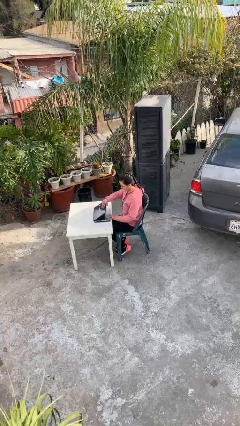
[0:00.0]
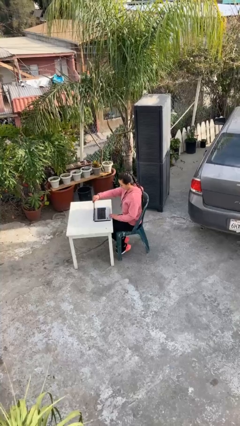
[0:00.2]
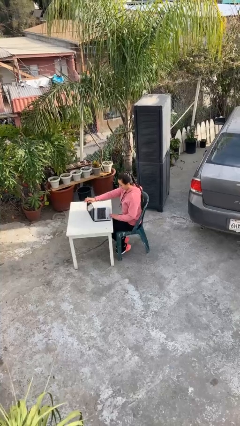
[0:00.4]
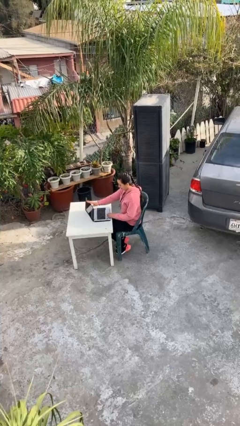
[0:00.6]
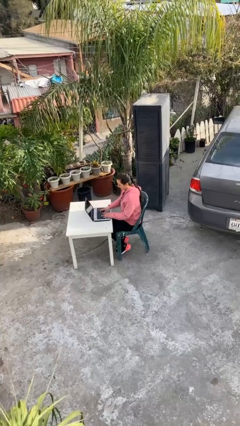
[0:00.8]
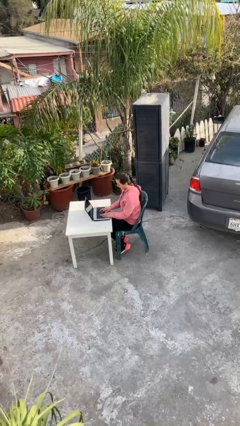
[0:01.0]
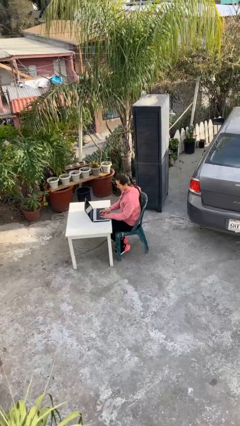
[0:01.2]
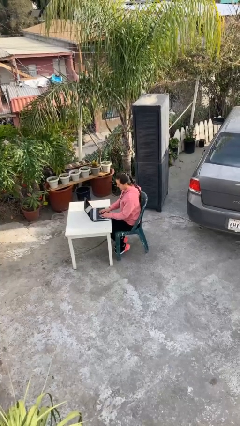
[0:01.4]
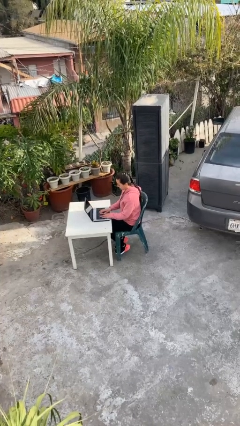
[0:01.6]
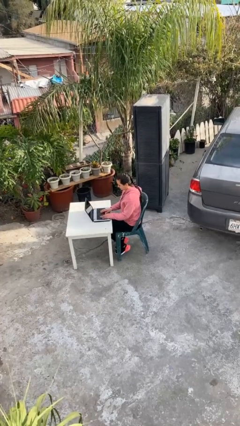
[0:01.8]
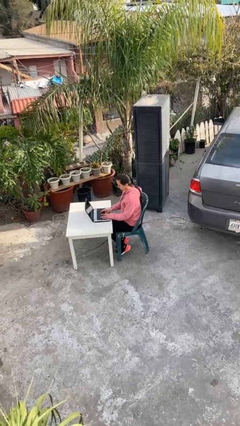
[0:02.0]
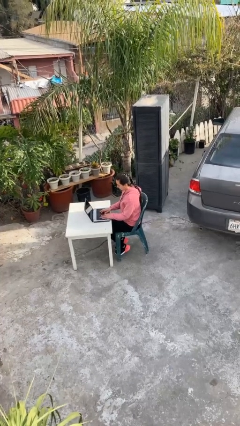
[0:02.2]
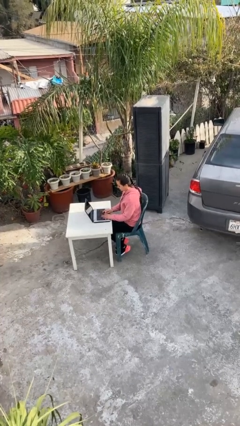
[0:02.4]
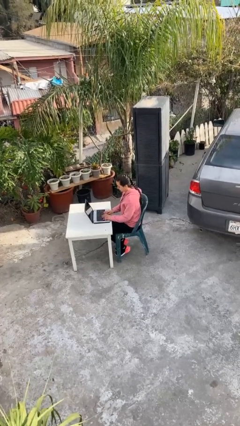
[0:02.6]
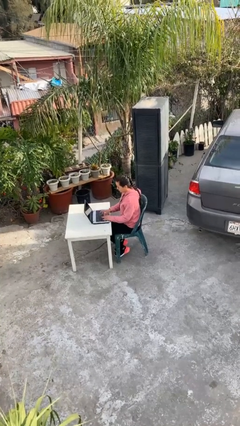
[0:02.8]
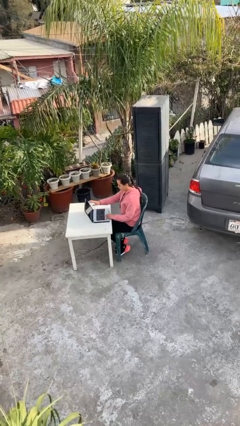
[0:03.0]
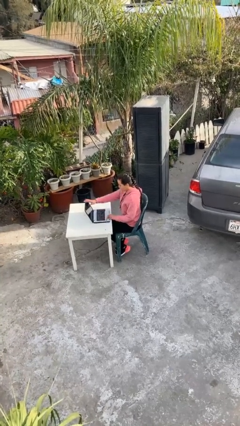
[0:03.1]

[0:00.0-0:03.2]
person interacts with laptop

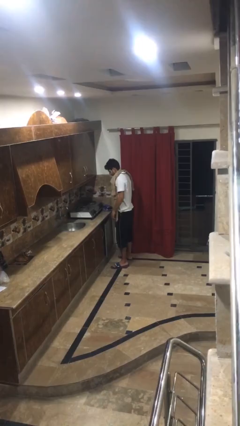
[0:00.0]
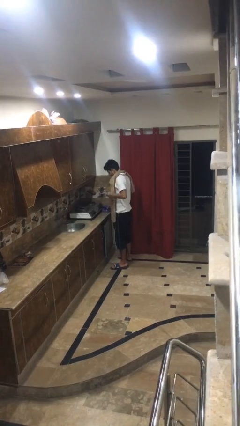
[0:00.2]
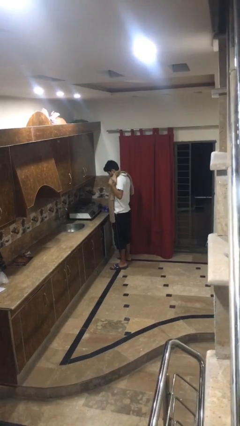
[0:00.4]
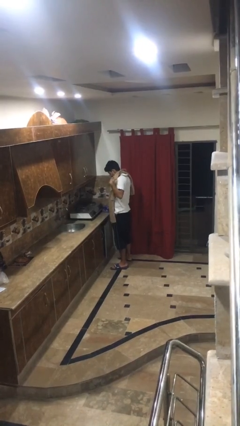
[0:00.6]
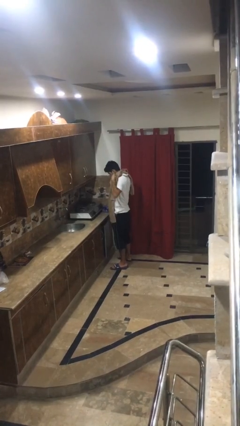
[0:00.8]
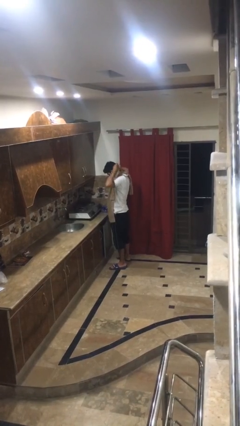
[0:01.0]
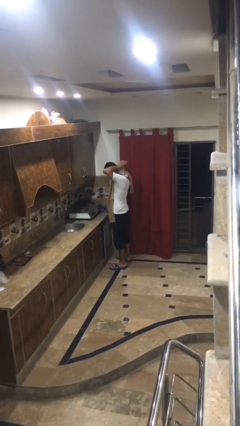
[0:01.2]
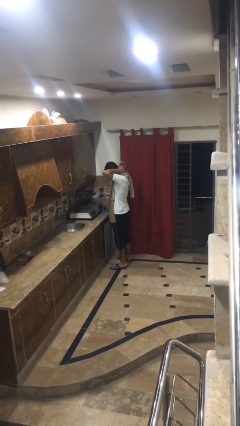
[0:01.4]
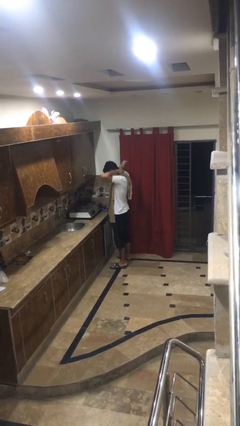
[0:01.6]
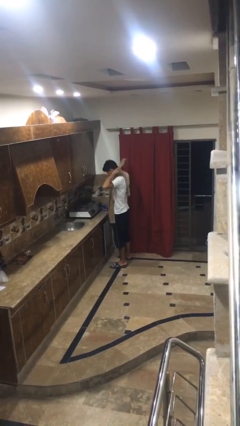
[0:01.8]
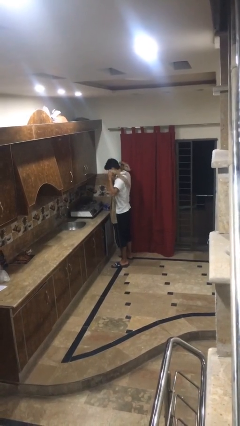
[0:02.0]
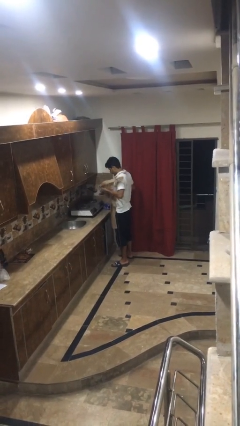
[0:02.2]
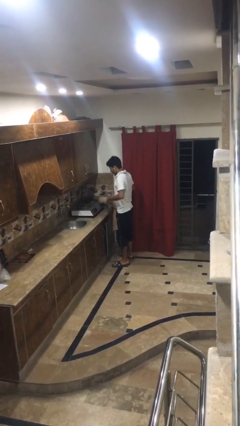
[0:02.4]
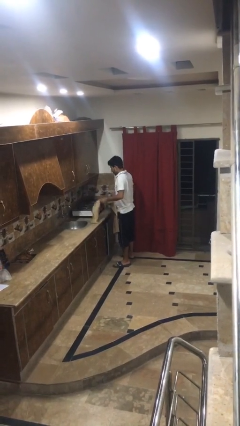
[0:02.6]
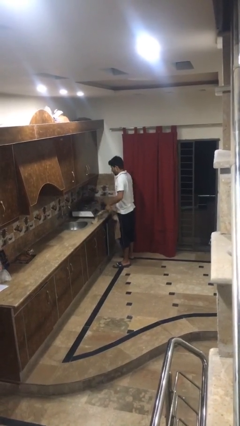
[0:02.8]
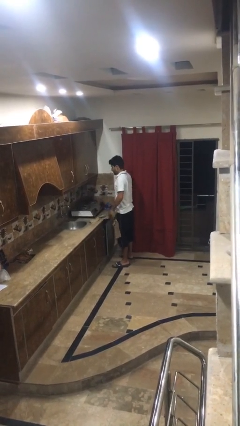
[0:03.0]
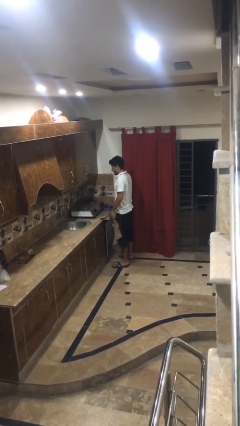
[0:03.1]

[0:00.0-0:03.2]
person takes off apron

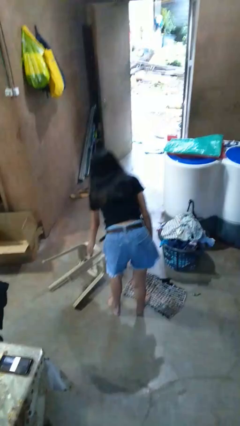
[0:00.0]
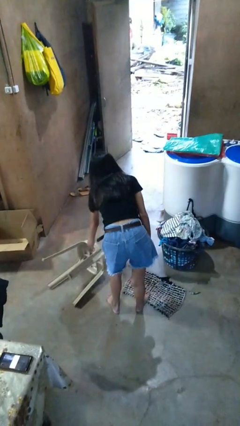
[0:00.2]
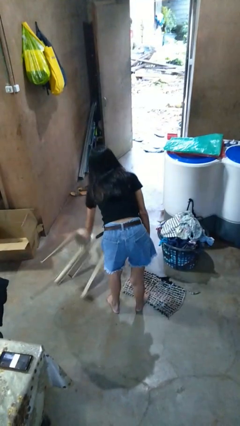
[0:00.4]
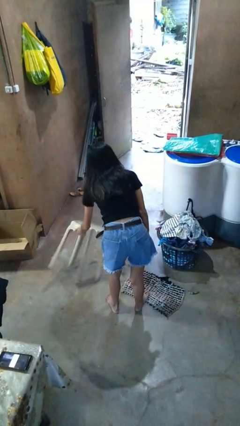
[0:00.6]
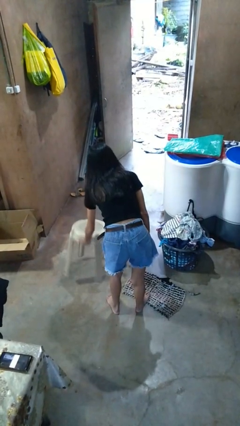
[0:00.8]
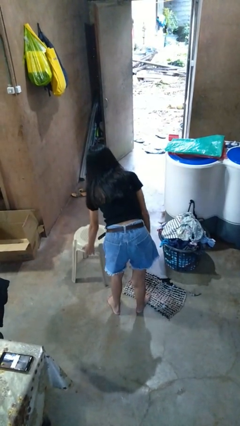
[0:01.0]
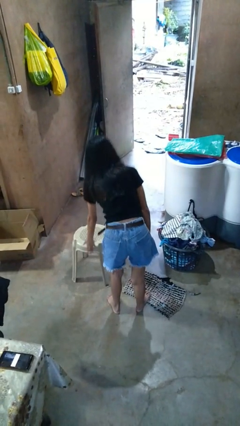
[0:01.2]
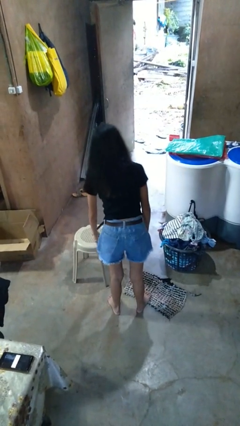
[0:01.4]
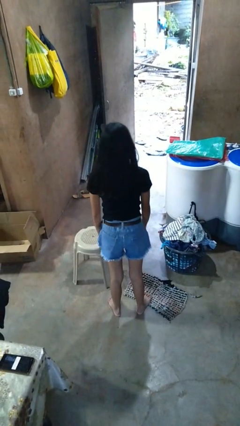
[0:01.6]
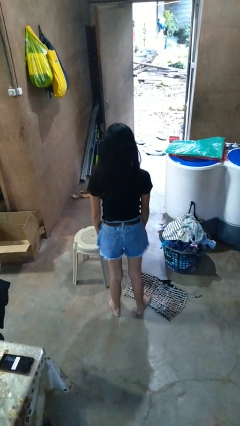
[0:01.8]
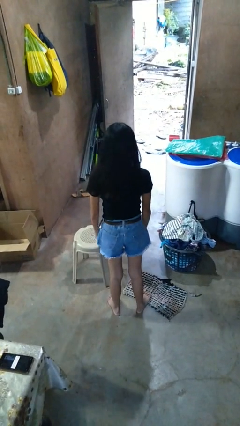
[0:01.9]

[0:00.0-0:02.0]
person sets upright furniture

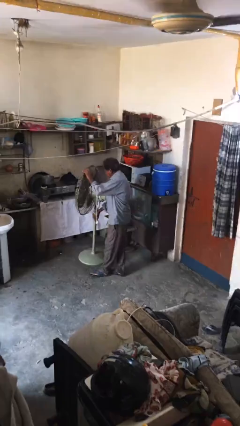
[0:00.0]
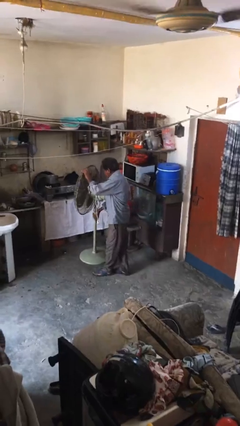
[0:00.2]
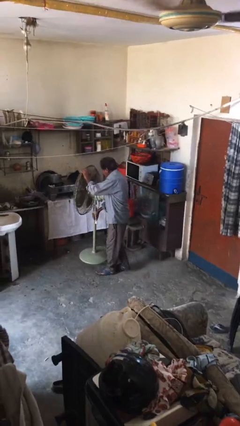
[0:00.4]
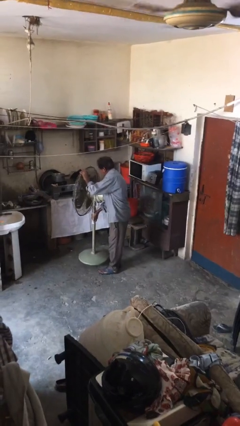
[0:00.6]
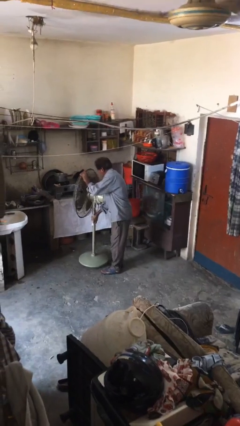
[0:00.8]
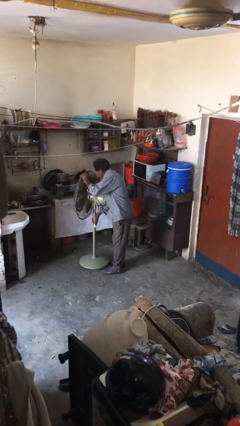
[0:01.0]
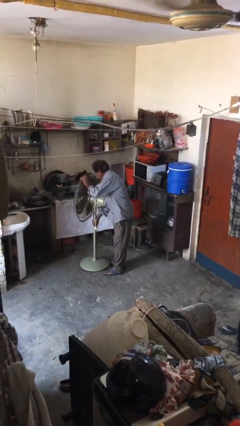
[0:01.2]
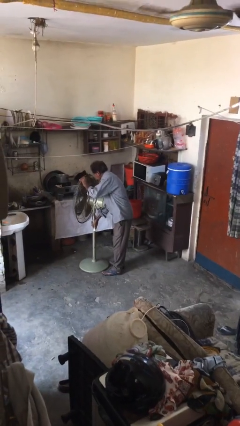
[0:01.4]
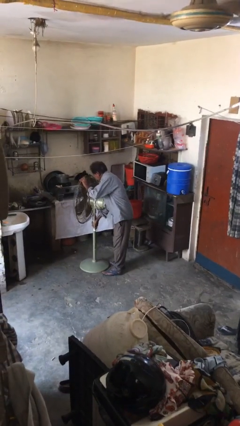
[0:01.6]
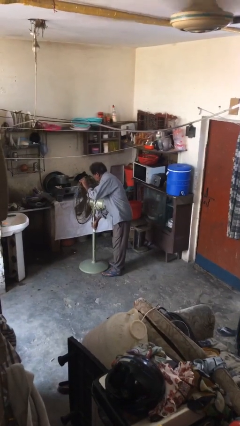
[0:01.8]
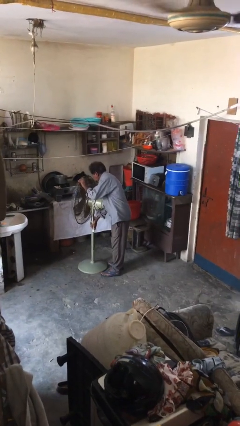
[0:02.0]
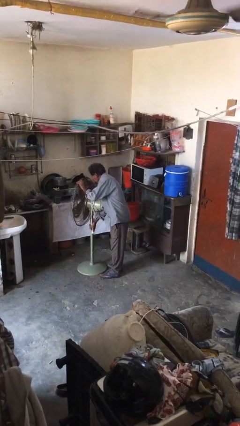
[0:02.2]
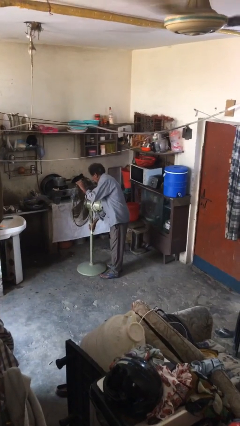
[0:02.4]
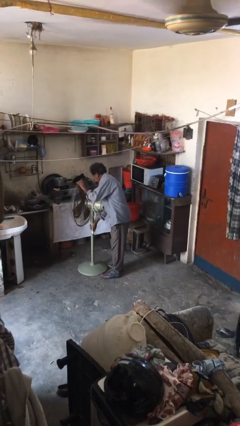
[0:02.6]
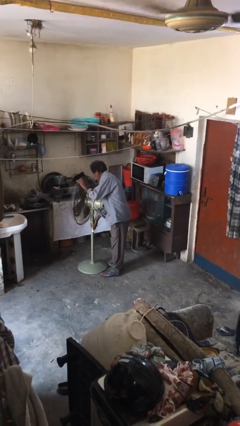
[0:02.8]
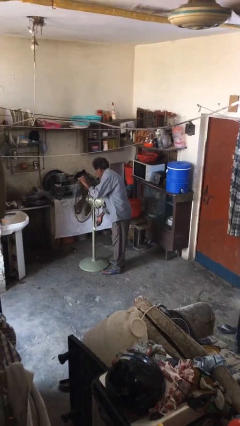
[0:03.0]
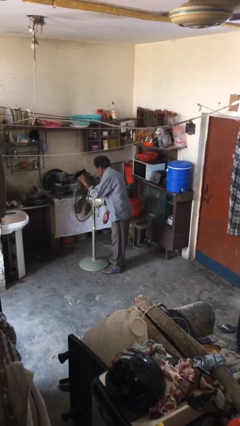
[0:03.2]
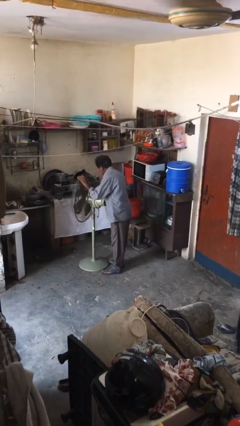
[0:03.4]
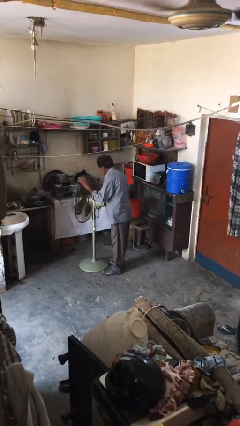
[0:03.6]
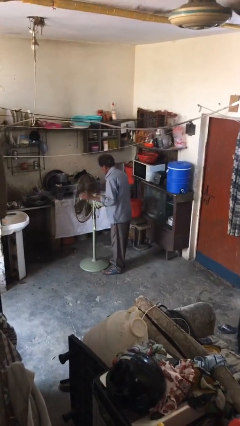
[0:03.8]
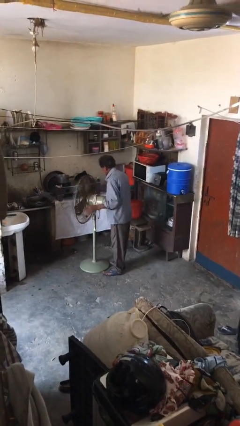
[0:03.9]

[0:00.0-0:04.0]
person puts down object on floor

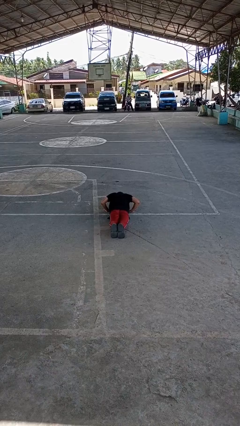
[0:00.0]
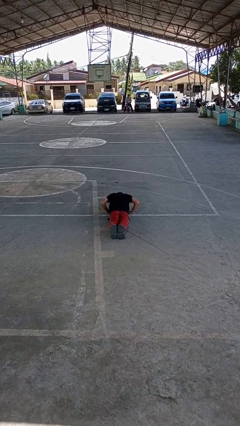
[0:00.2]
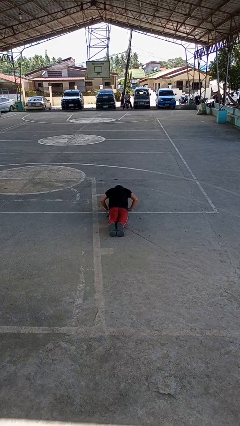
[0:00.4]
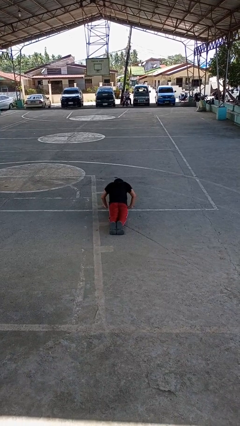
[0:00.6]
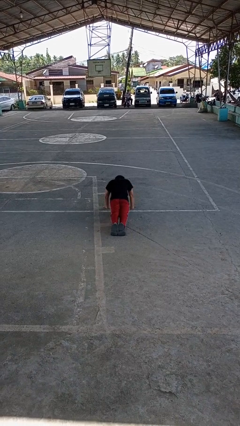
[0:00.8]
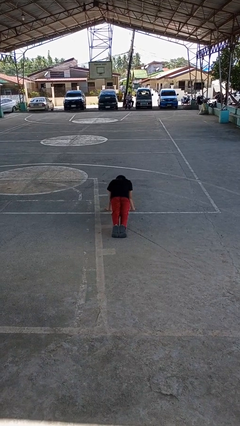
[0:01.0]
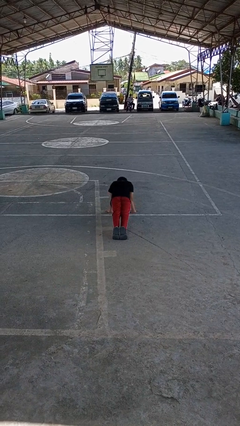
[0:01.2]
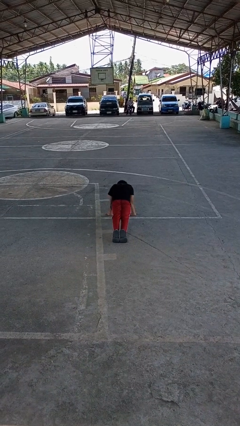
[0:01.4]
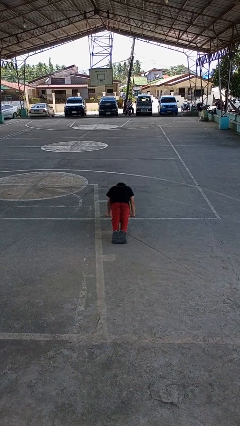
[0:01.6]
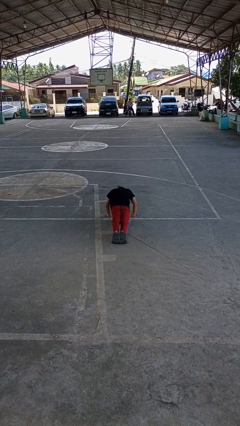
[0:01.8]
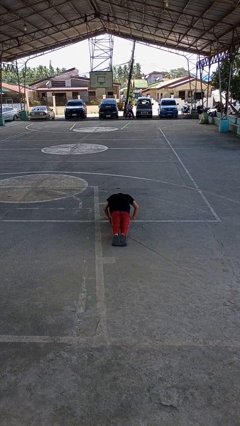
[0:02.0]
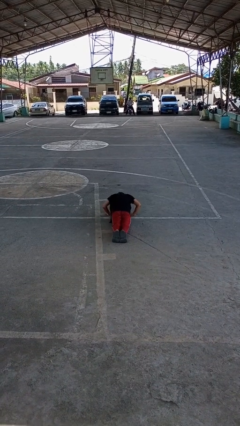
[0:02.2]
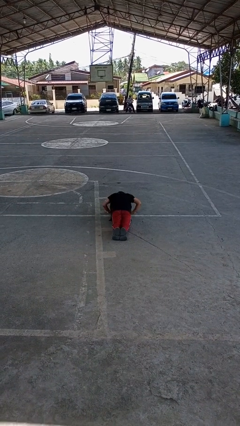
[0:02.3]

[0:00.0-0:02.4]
person exercises with pushup

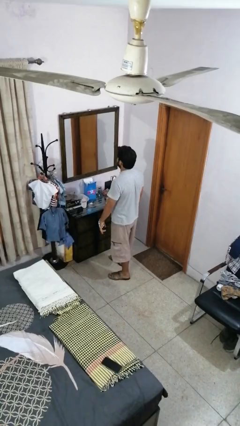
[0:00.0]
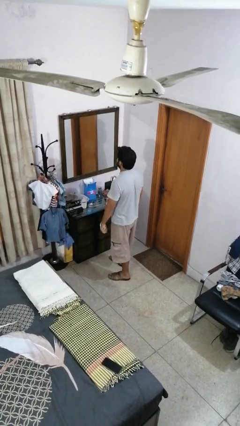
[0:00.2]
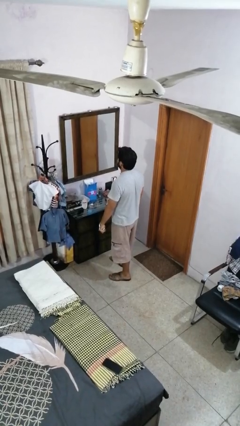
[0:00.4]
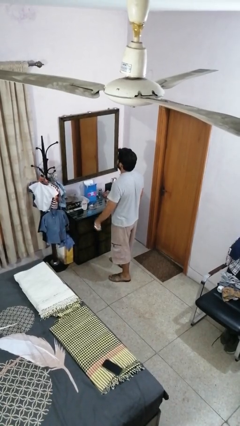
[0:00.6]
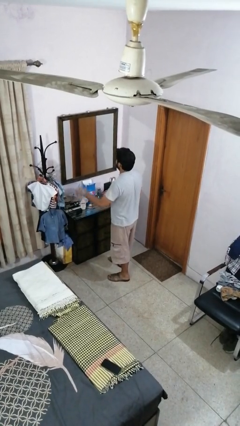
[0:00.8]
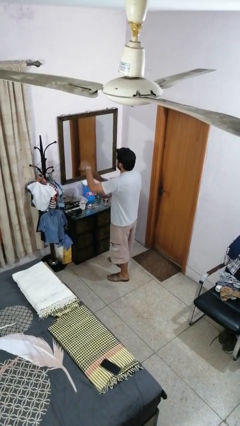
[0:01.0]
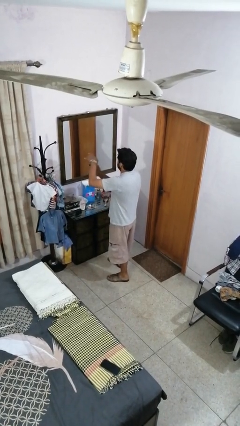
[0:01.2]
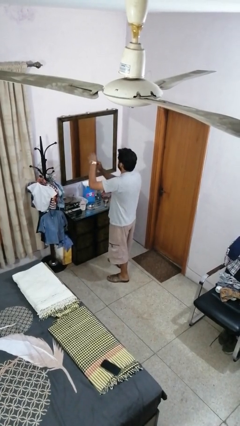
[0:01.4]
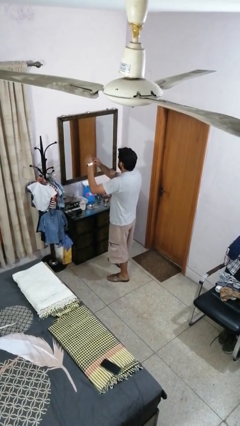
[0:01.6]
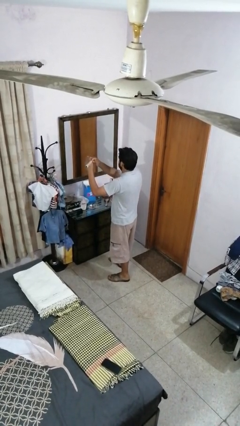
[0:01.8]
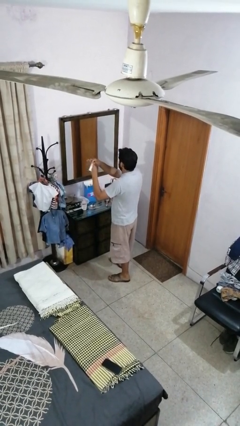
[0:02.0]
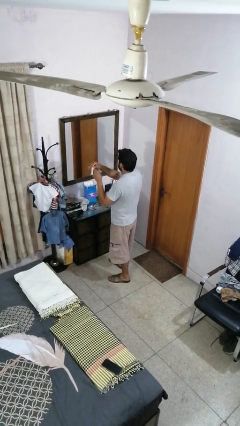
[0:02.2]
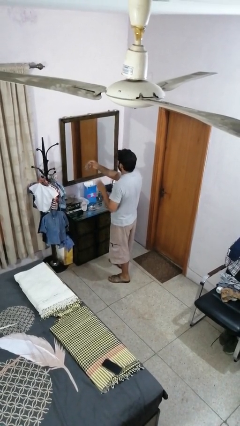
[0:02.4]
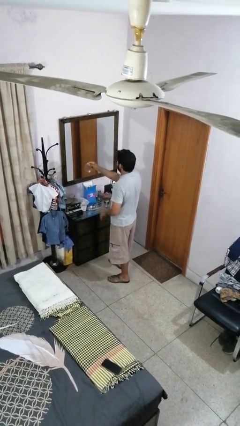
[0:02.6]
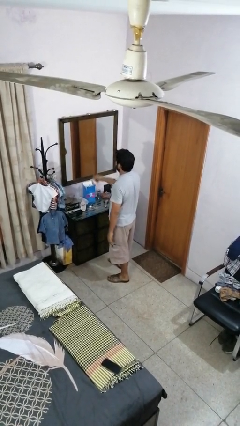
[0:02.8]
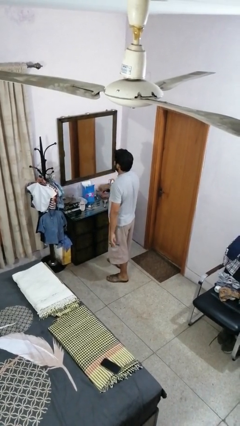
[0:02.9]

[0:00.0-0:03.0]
person takes off wristwatch
